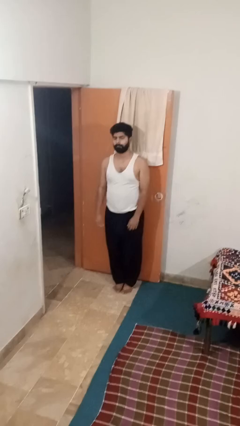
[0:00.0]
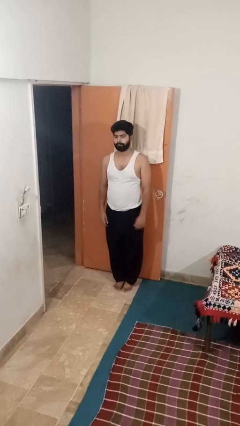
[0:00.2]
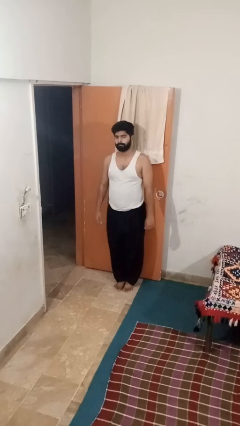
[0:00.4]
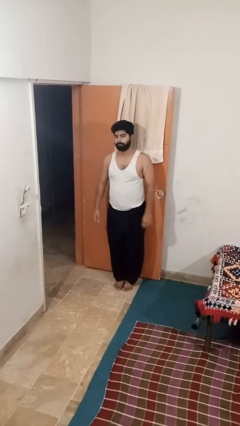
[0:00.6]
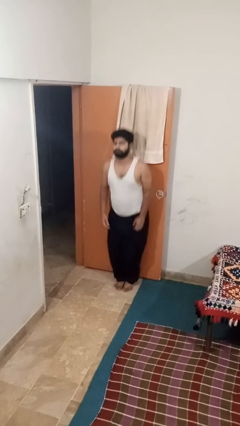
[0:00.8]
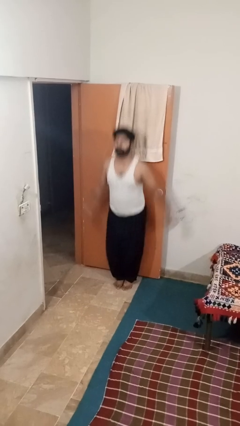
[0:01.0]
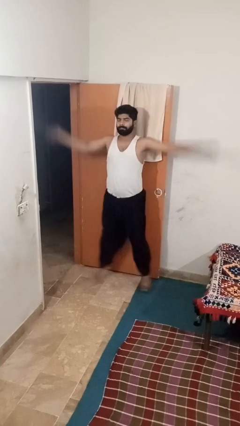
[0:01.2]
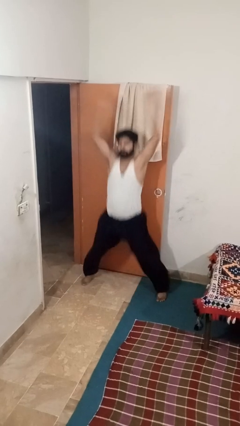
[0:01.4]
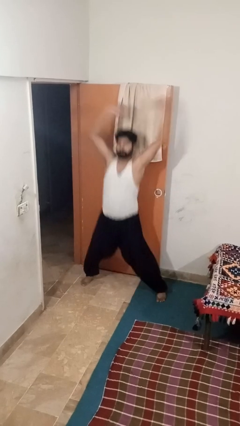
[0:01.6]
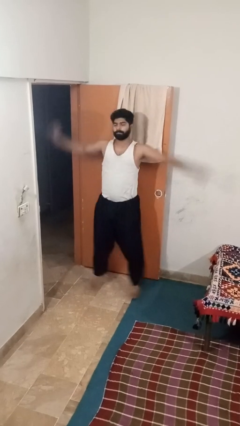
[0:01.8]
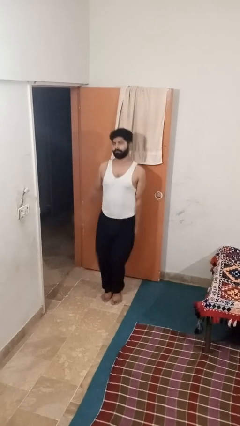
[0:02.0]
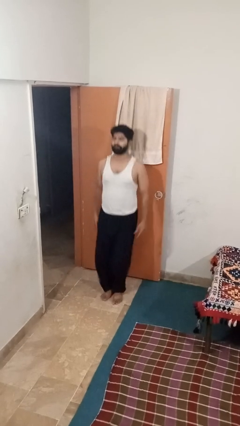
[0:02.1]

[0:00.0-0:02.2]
person exercises with jumping jacks

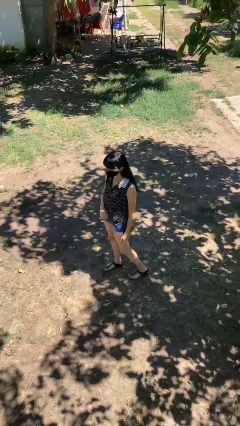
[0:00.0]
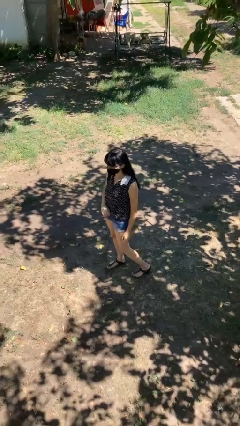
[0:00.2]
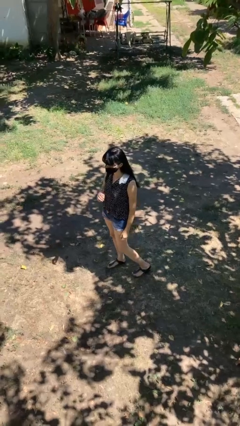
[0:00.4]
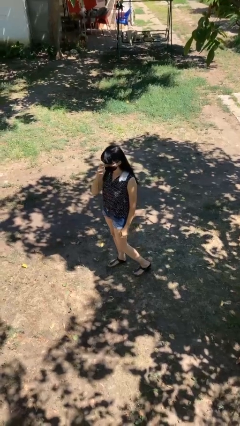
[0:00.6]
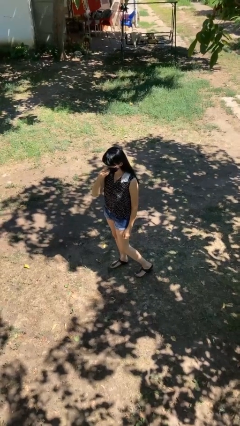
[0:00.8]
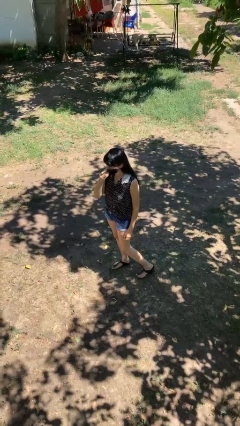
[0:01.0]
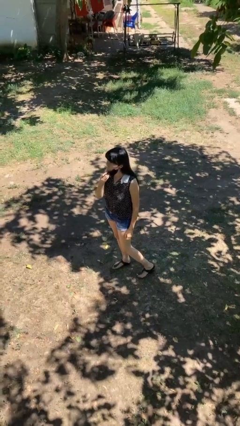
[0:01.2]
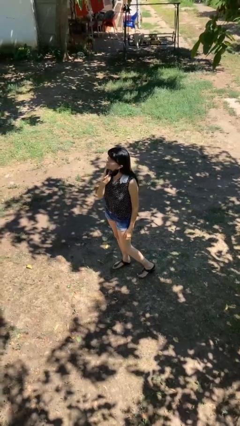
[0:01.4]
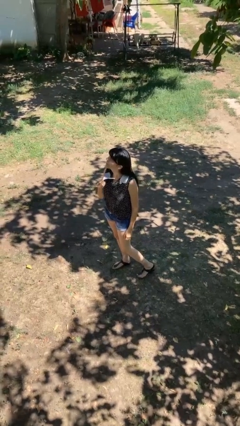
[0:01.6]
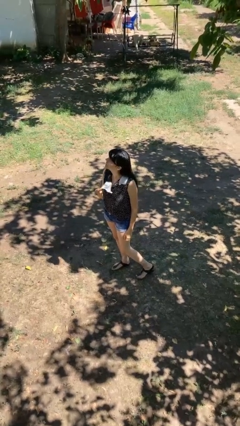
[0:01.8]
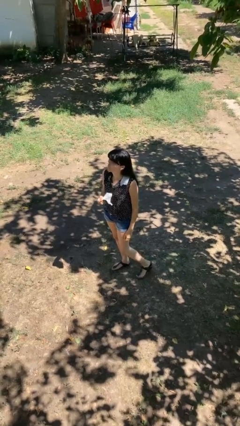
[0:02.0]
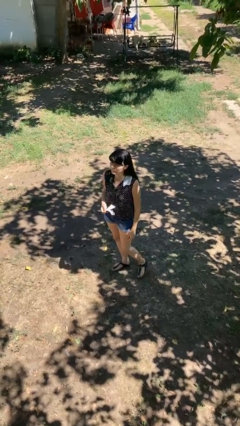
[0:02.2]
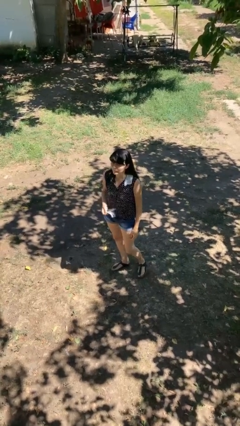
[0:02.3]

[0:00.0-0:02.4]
person takes off facemask

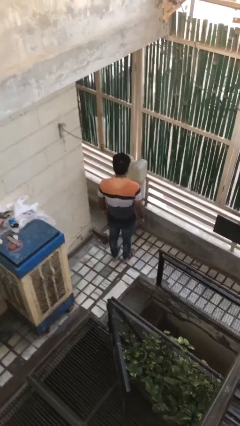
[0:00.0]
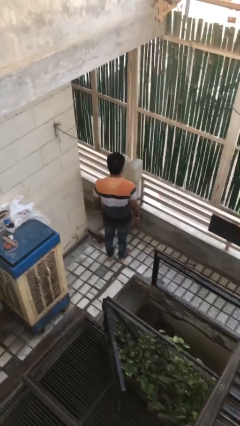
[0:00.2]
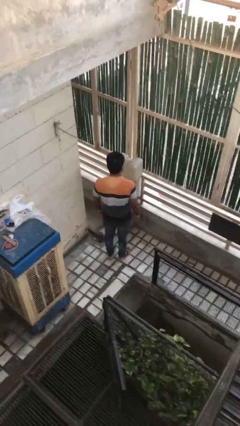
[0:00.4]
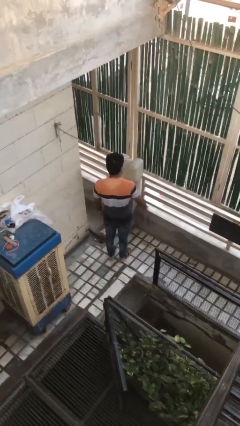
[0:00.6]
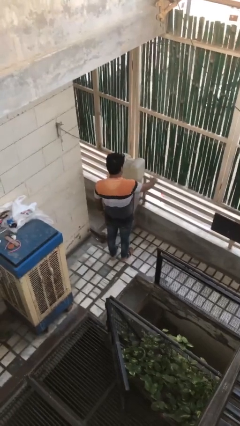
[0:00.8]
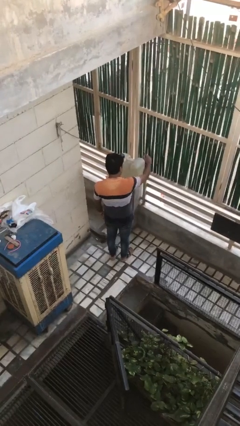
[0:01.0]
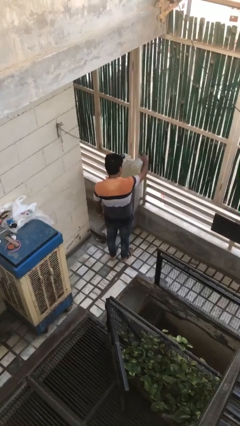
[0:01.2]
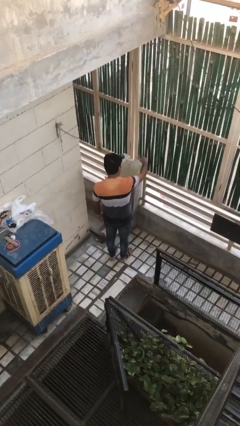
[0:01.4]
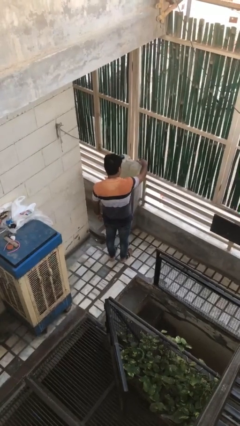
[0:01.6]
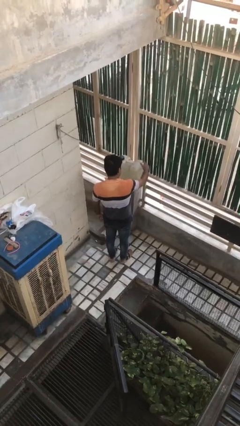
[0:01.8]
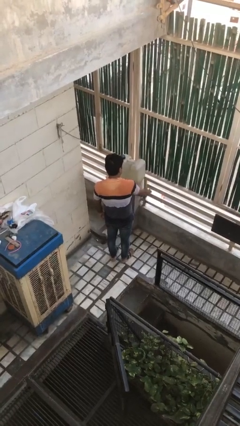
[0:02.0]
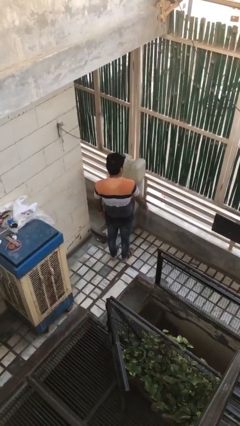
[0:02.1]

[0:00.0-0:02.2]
person taps object with finger

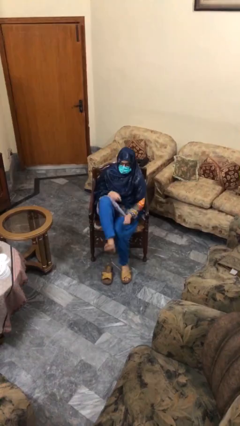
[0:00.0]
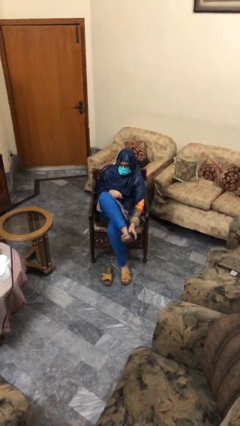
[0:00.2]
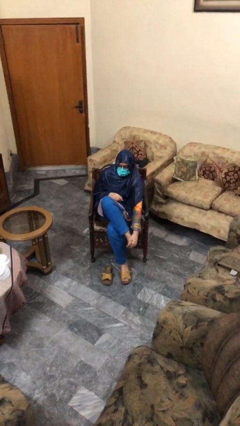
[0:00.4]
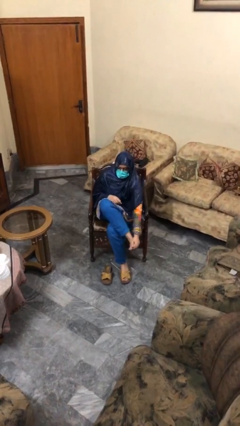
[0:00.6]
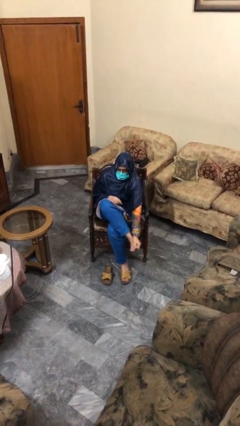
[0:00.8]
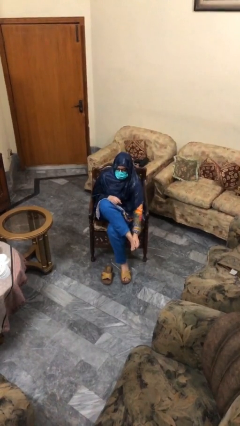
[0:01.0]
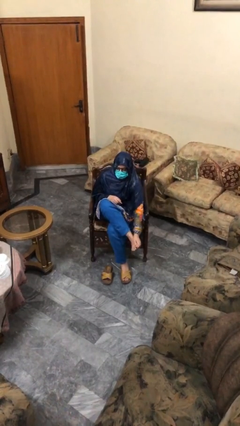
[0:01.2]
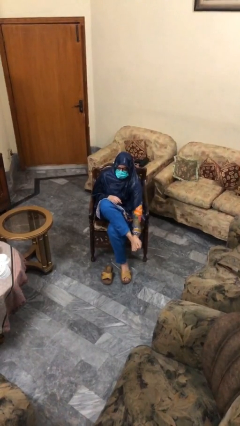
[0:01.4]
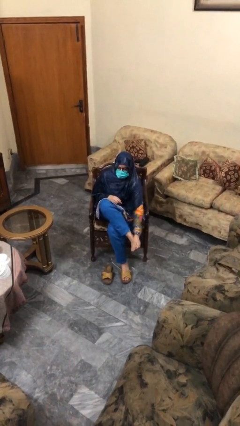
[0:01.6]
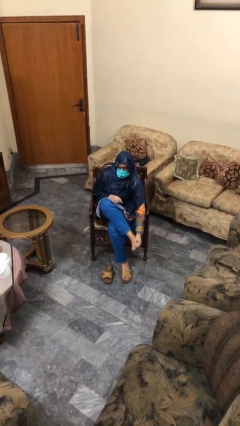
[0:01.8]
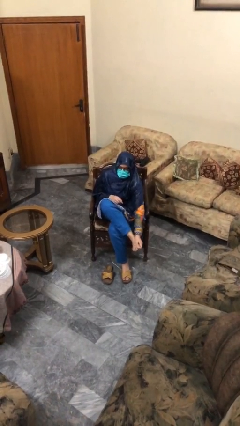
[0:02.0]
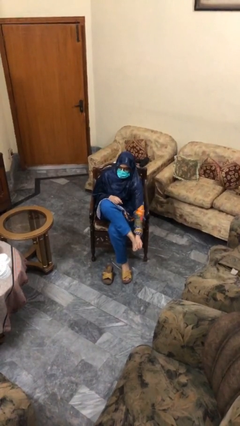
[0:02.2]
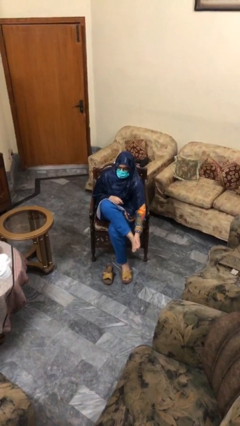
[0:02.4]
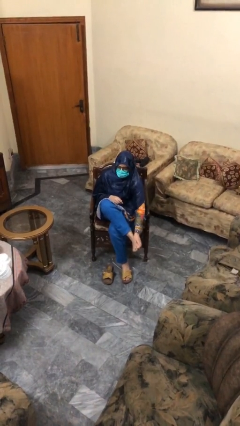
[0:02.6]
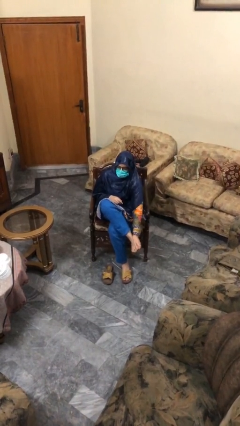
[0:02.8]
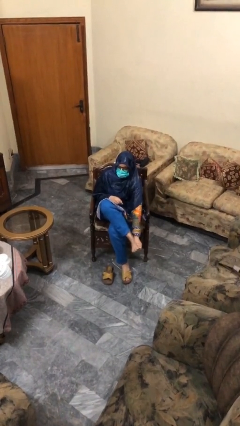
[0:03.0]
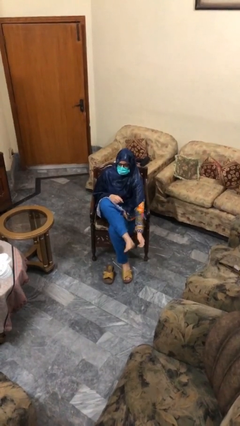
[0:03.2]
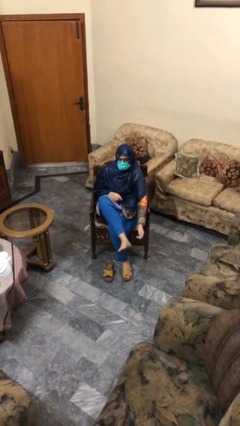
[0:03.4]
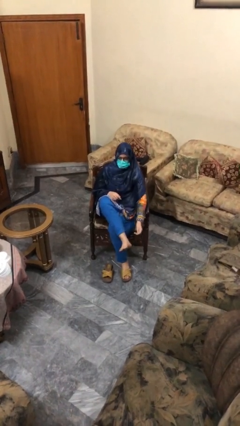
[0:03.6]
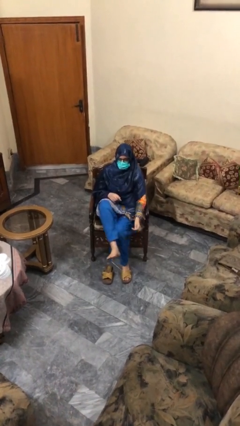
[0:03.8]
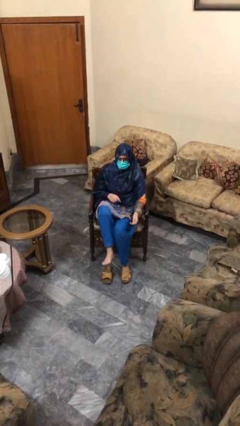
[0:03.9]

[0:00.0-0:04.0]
person rubs foot

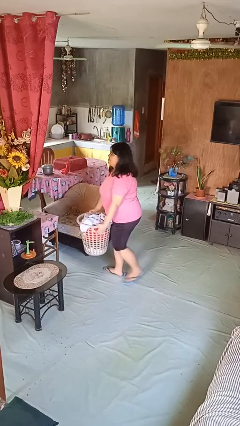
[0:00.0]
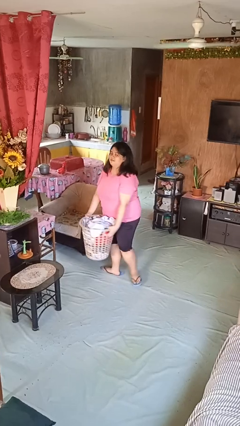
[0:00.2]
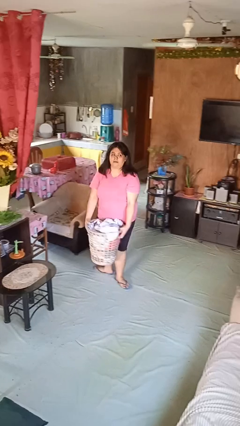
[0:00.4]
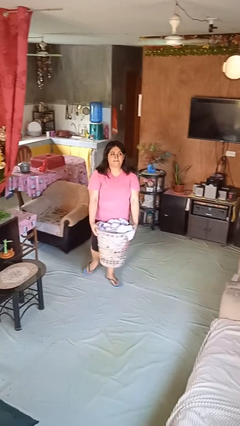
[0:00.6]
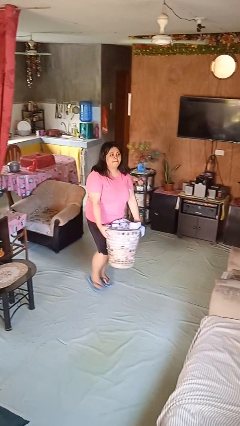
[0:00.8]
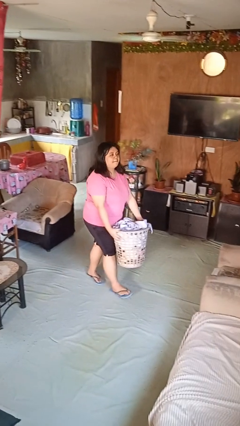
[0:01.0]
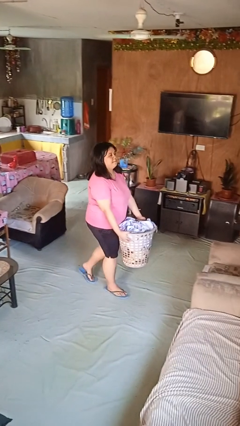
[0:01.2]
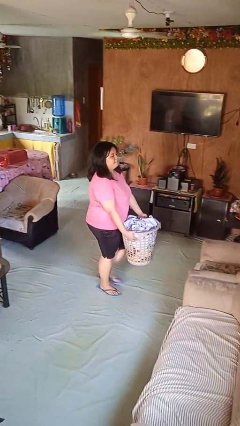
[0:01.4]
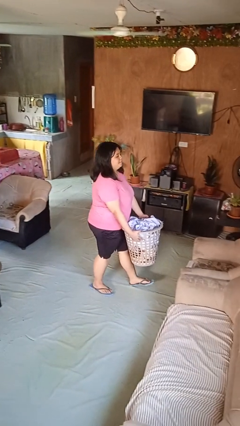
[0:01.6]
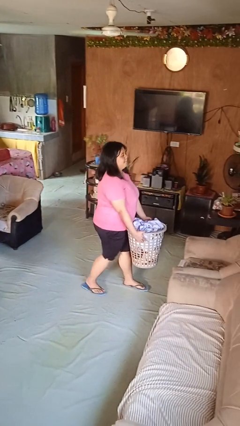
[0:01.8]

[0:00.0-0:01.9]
person carries laundry basket

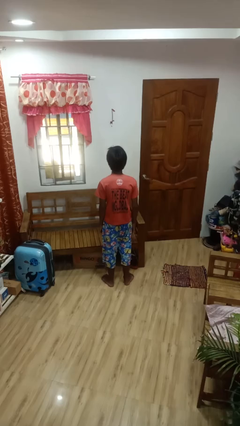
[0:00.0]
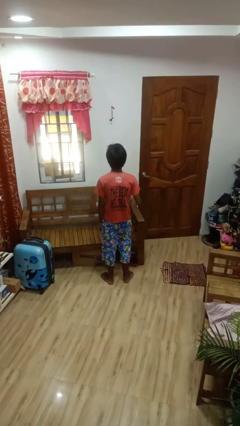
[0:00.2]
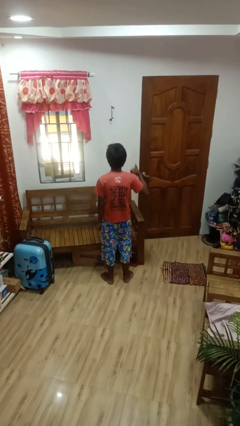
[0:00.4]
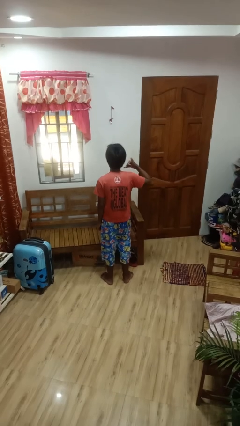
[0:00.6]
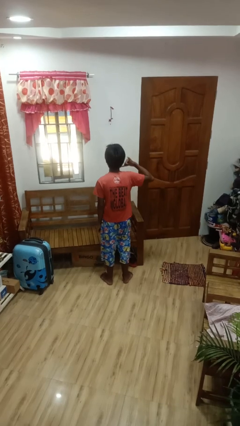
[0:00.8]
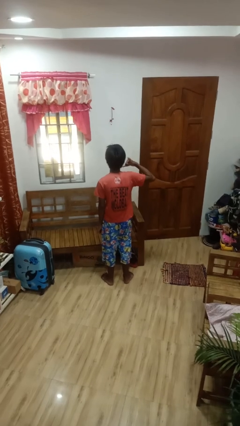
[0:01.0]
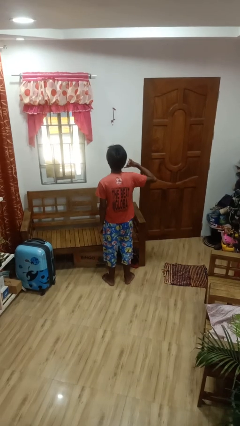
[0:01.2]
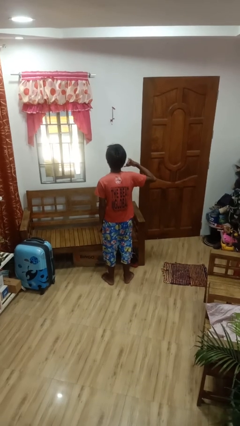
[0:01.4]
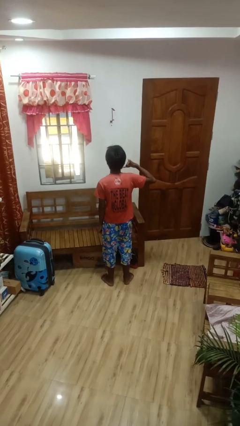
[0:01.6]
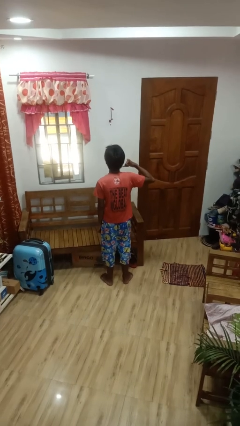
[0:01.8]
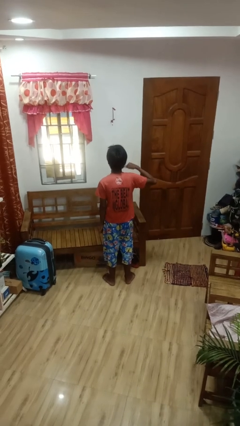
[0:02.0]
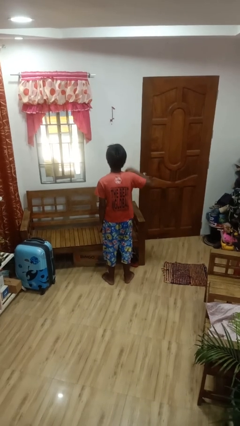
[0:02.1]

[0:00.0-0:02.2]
person gestures call me

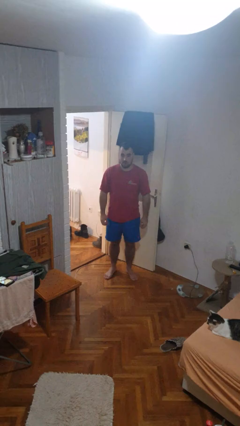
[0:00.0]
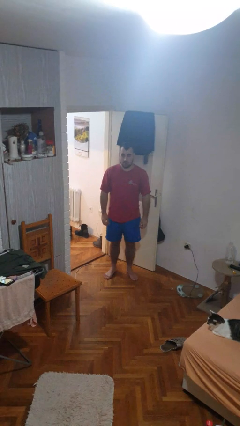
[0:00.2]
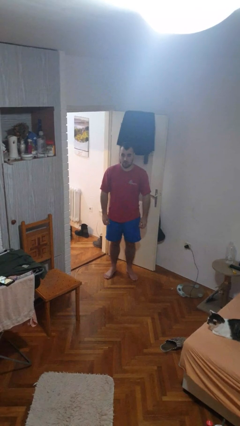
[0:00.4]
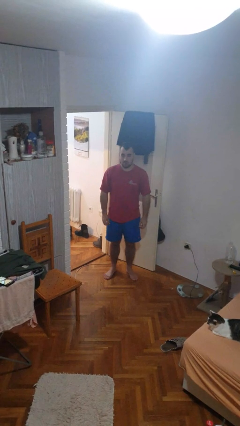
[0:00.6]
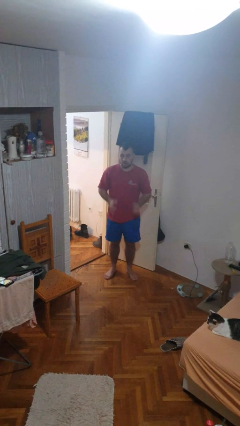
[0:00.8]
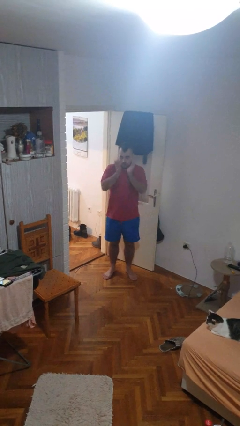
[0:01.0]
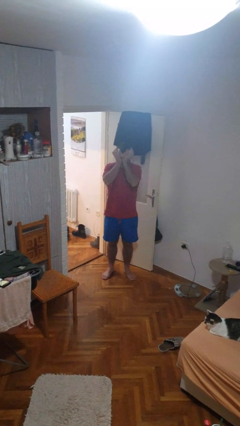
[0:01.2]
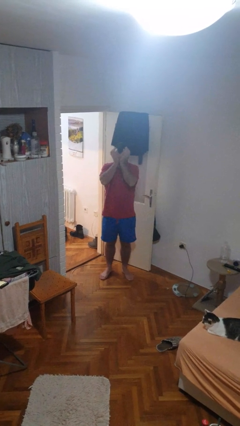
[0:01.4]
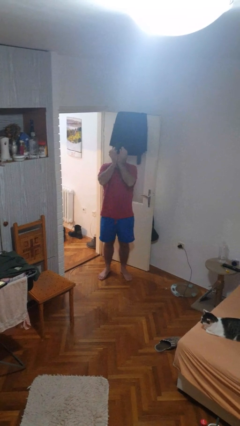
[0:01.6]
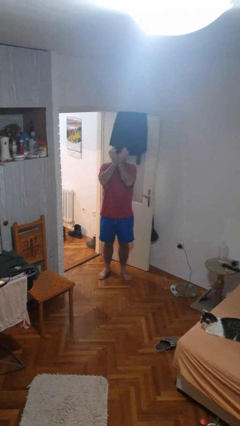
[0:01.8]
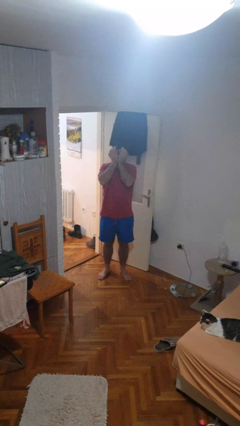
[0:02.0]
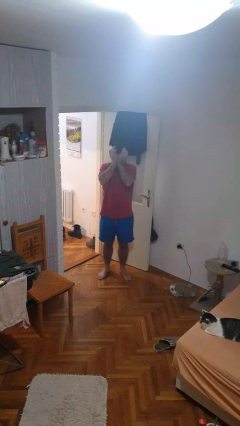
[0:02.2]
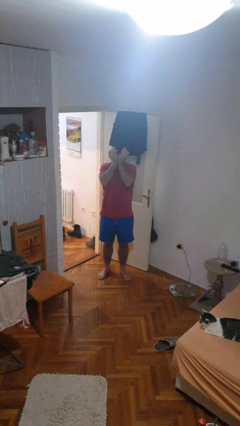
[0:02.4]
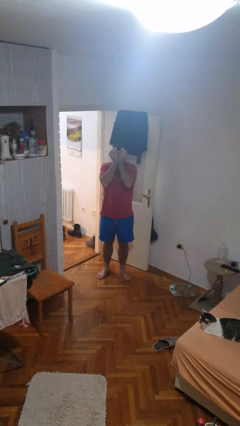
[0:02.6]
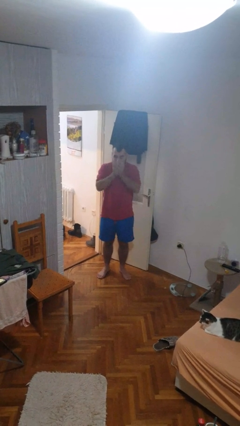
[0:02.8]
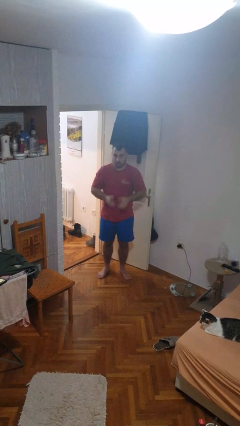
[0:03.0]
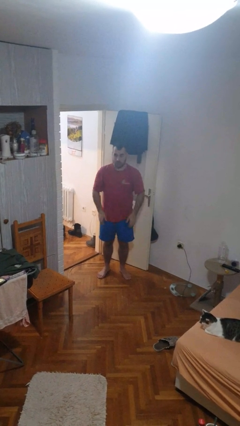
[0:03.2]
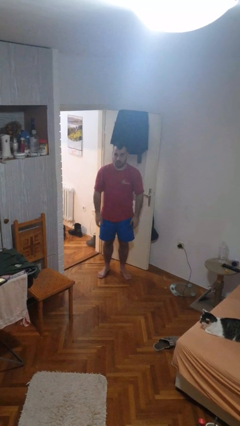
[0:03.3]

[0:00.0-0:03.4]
person rubs eyes
